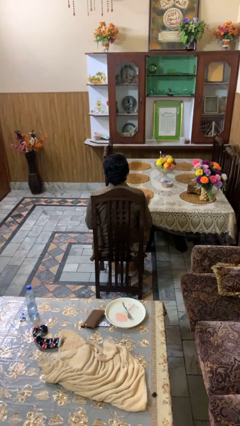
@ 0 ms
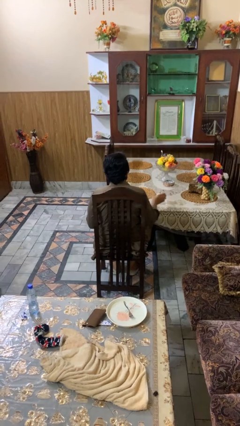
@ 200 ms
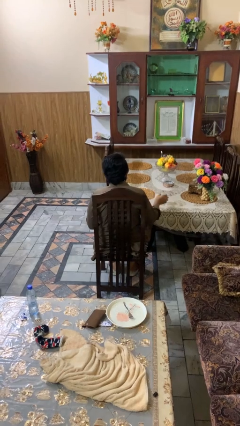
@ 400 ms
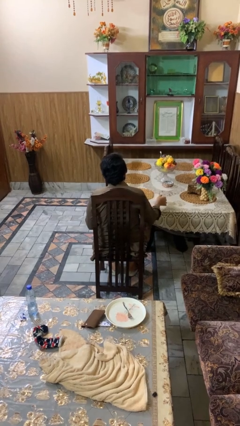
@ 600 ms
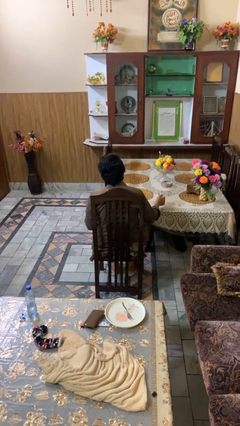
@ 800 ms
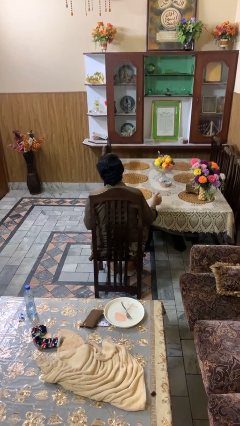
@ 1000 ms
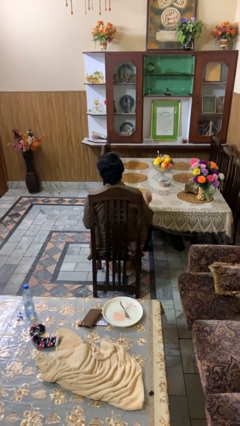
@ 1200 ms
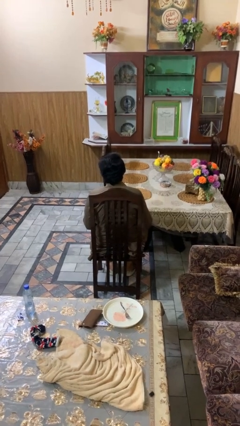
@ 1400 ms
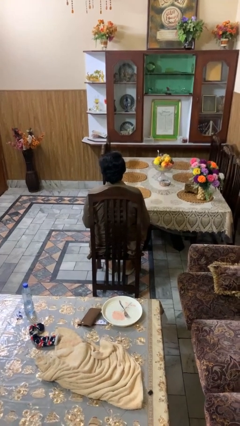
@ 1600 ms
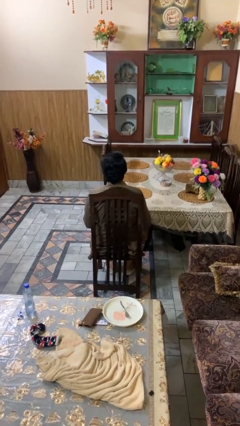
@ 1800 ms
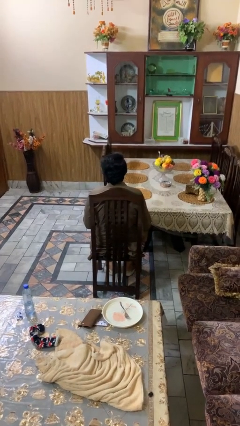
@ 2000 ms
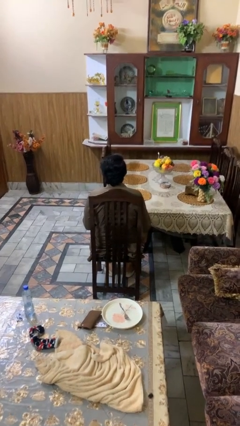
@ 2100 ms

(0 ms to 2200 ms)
person picks up object from table

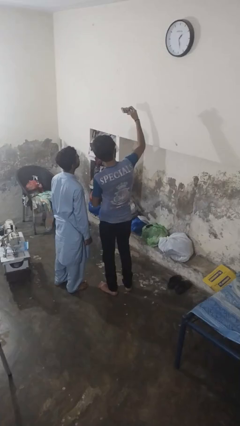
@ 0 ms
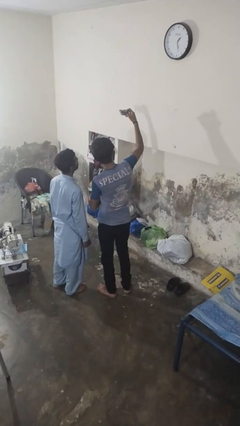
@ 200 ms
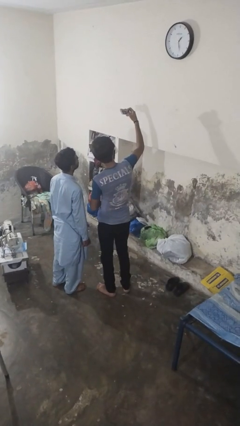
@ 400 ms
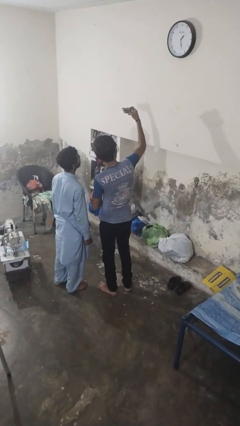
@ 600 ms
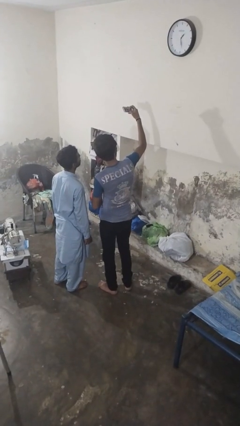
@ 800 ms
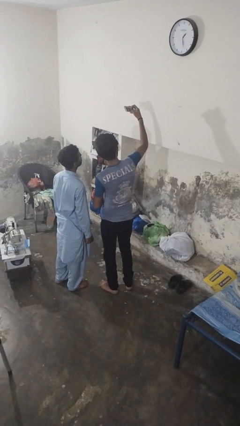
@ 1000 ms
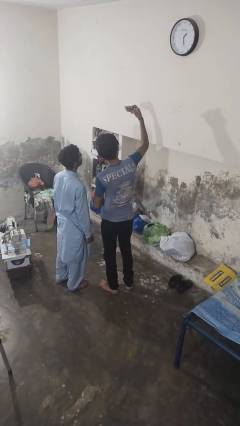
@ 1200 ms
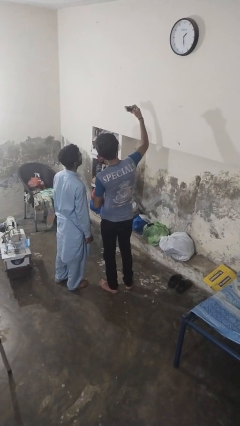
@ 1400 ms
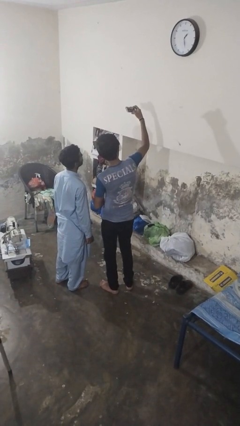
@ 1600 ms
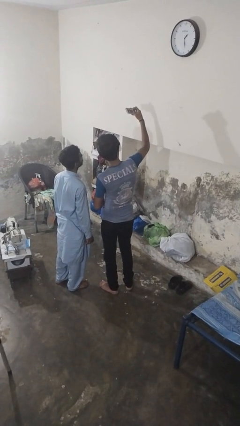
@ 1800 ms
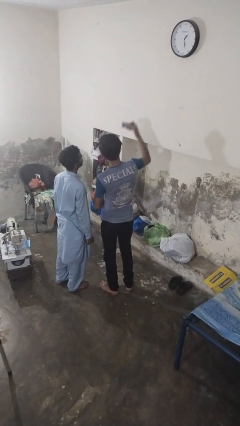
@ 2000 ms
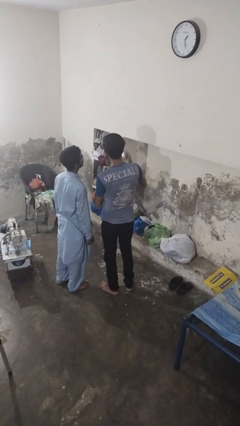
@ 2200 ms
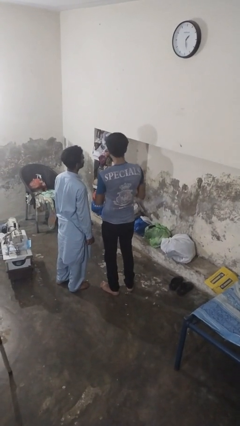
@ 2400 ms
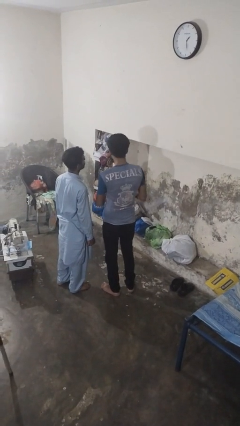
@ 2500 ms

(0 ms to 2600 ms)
person takes selfie with person

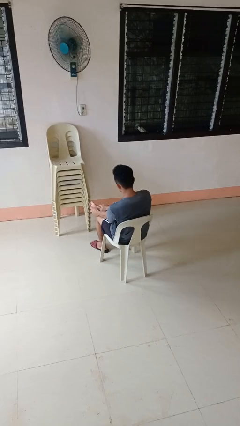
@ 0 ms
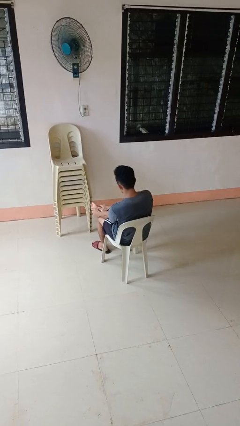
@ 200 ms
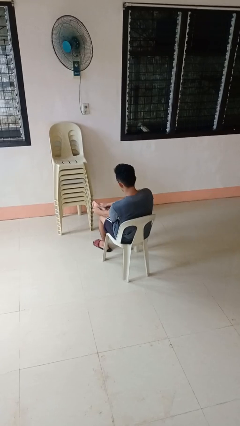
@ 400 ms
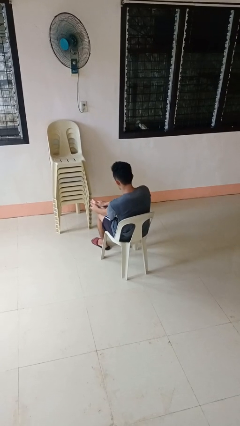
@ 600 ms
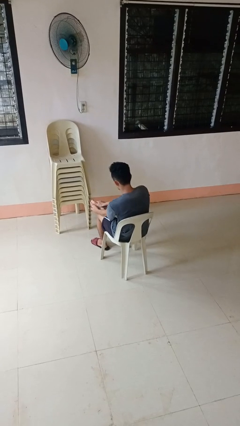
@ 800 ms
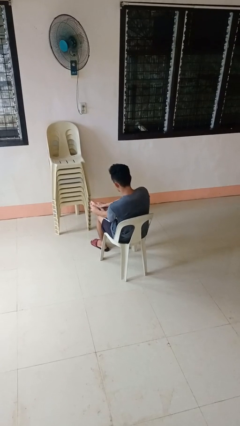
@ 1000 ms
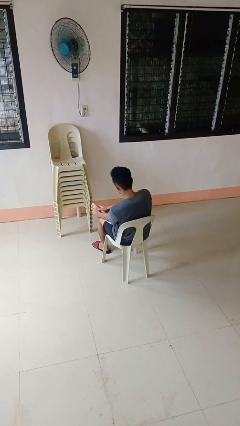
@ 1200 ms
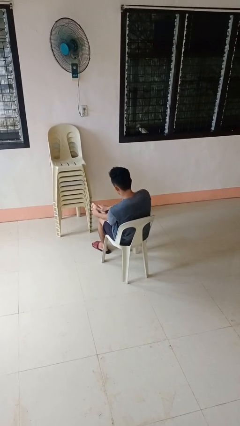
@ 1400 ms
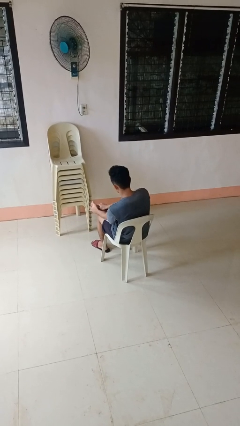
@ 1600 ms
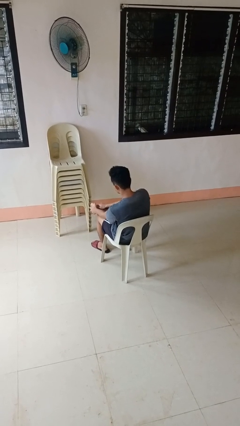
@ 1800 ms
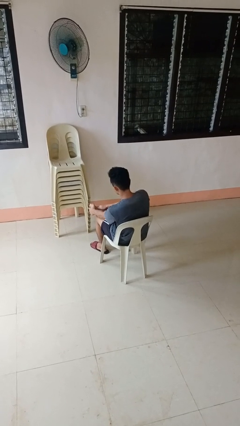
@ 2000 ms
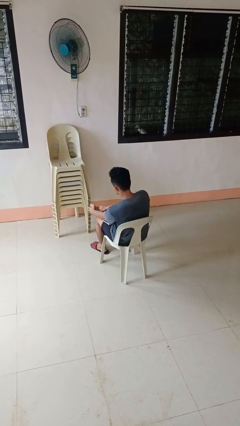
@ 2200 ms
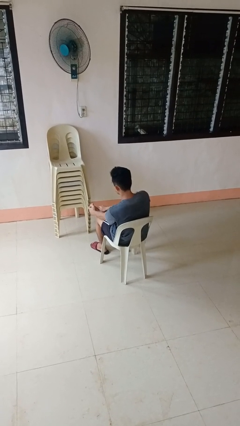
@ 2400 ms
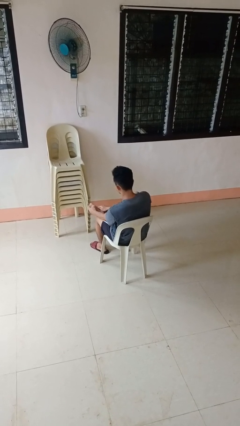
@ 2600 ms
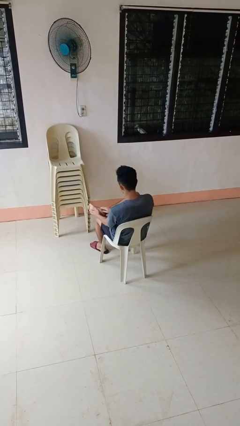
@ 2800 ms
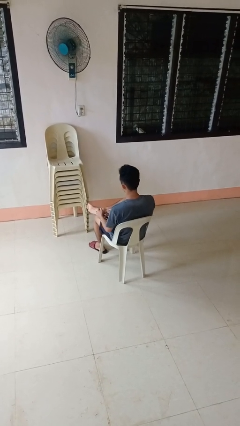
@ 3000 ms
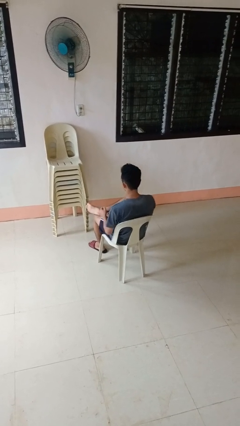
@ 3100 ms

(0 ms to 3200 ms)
person rubs foot

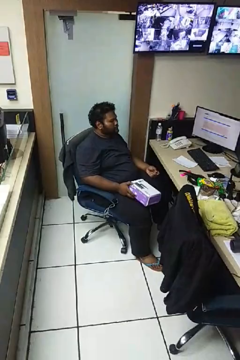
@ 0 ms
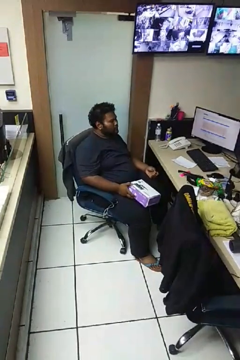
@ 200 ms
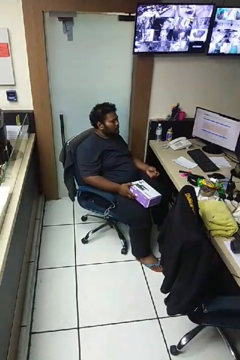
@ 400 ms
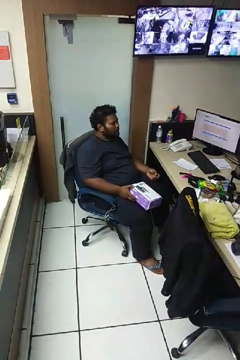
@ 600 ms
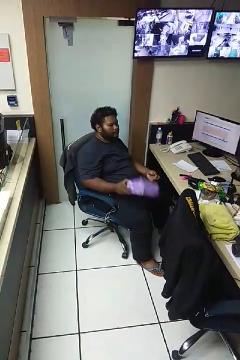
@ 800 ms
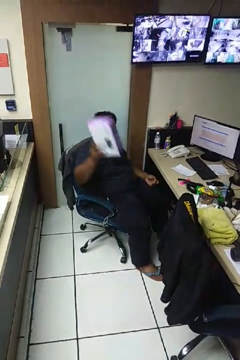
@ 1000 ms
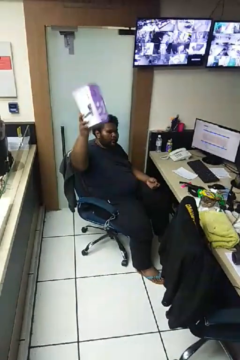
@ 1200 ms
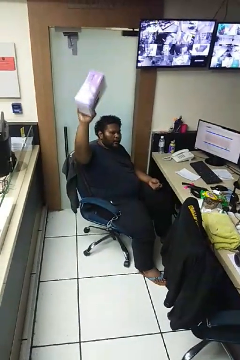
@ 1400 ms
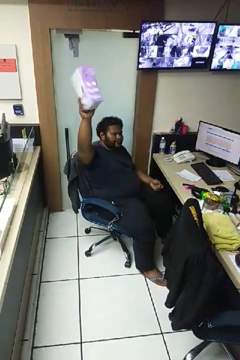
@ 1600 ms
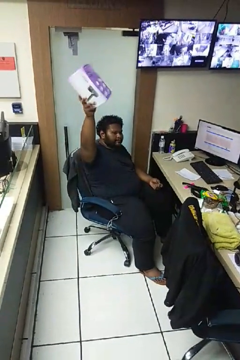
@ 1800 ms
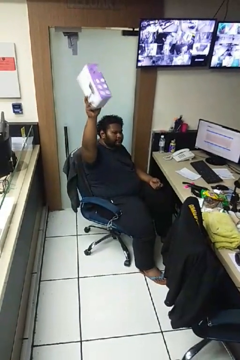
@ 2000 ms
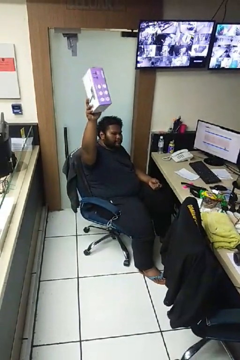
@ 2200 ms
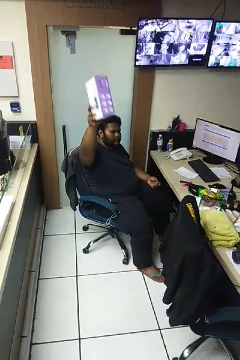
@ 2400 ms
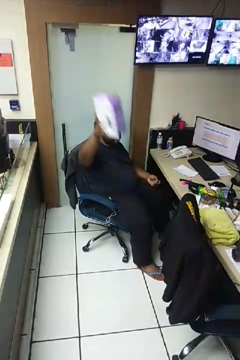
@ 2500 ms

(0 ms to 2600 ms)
person holds object above head

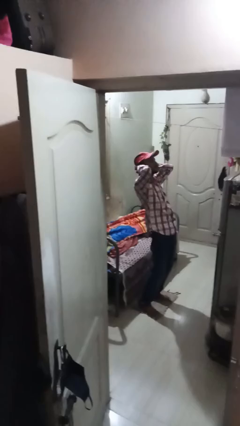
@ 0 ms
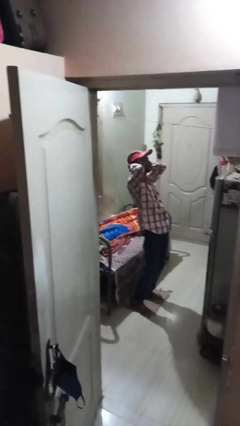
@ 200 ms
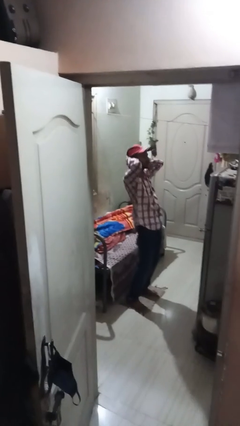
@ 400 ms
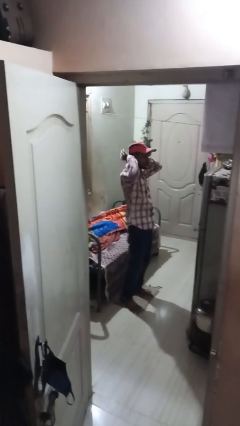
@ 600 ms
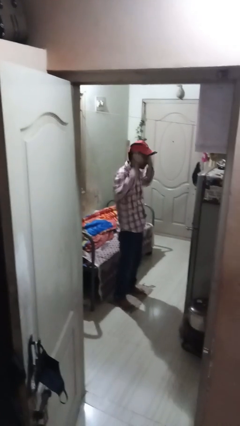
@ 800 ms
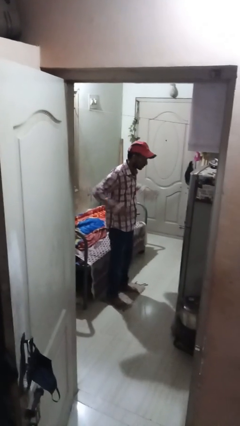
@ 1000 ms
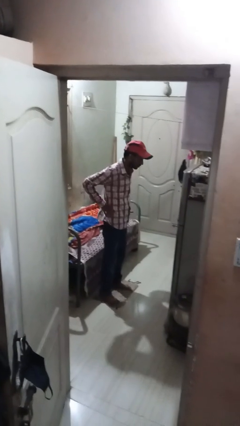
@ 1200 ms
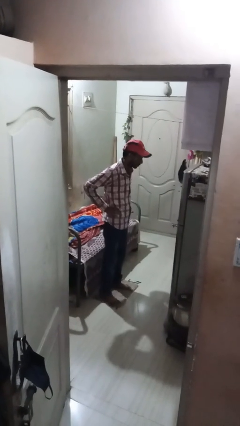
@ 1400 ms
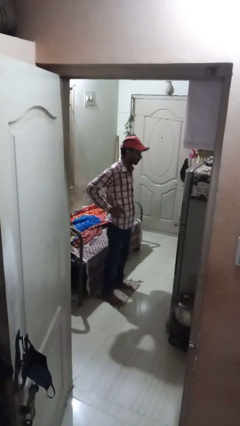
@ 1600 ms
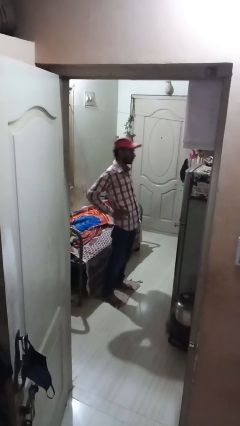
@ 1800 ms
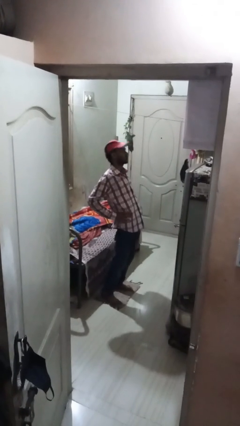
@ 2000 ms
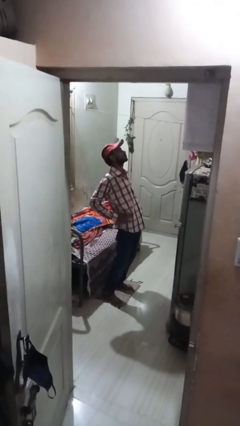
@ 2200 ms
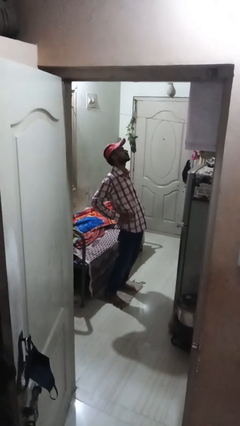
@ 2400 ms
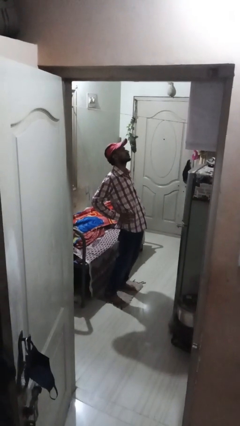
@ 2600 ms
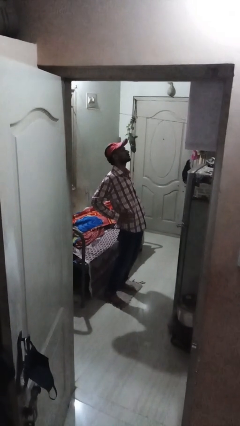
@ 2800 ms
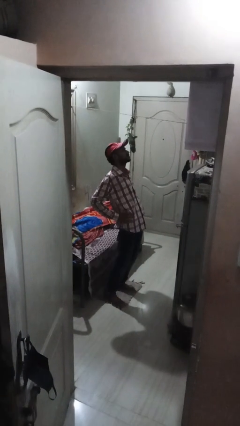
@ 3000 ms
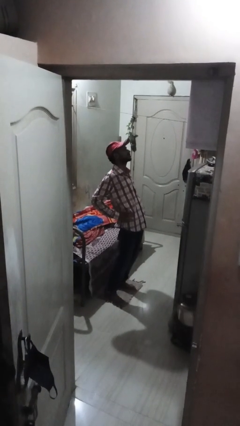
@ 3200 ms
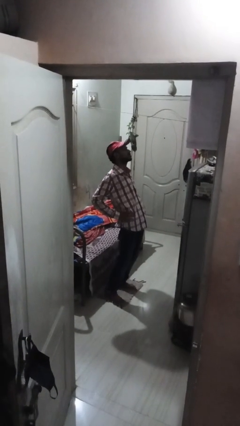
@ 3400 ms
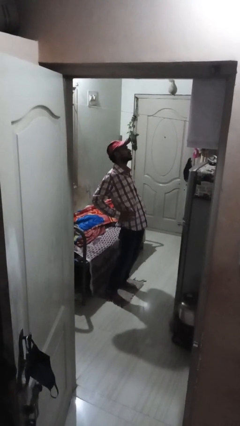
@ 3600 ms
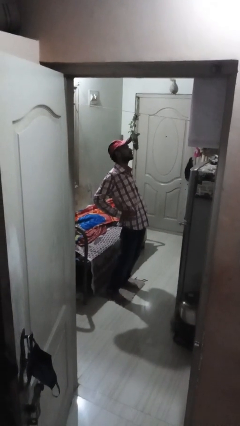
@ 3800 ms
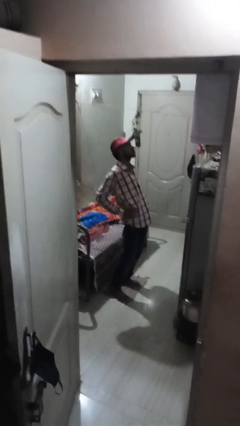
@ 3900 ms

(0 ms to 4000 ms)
person stretches back

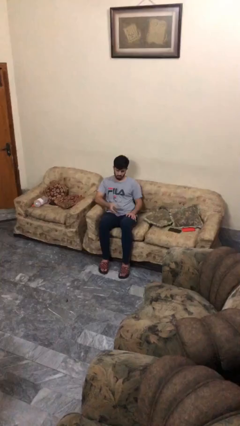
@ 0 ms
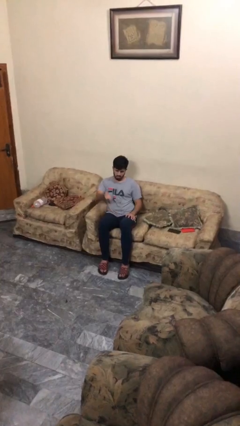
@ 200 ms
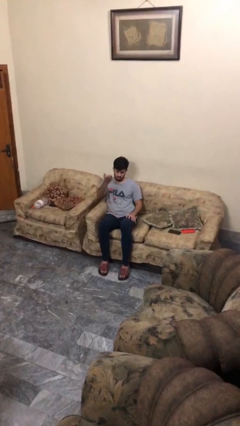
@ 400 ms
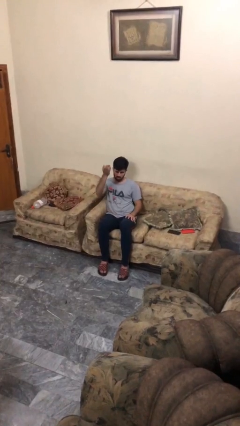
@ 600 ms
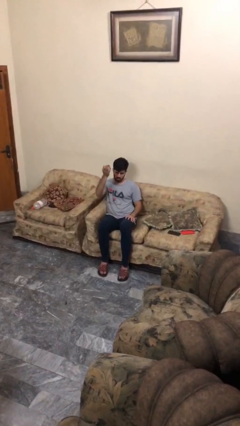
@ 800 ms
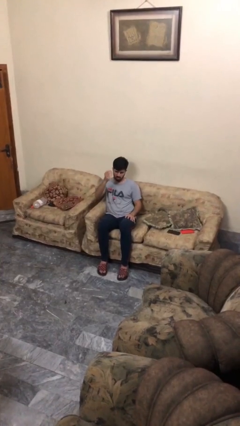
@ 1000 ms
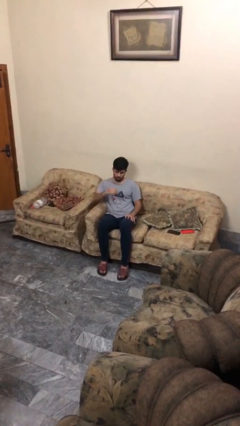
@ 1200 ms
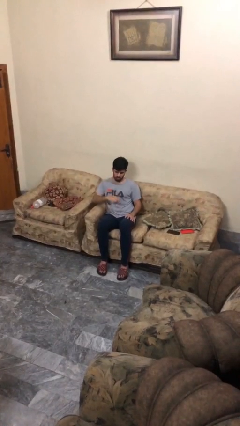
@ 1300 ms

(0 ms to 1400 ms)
person gestures swipe up

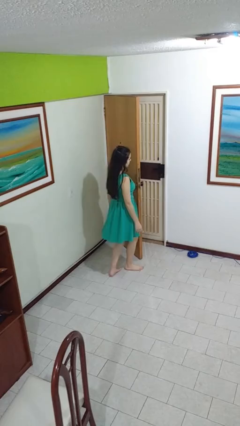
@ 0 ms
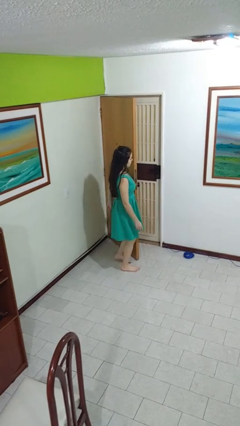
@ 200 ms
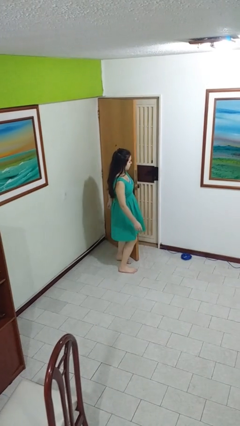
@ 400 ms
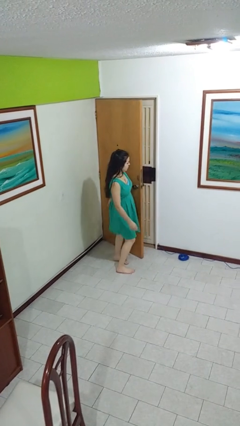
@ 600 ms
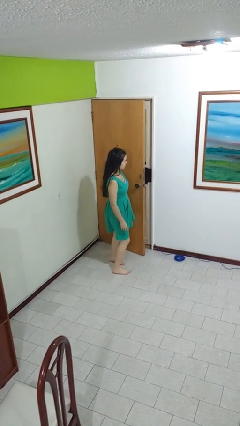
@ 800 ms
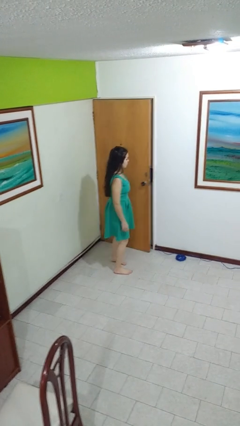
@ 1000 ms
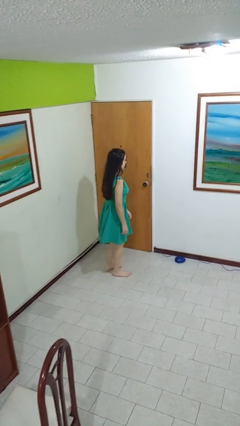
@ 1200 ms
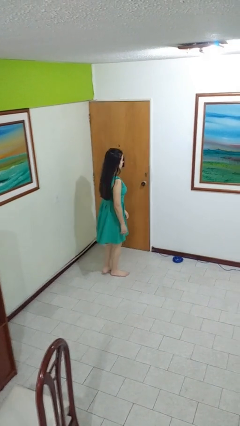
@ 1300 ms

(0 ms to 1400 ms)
person closes door with hip

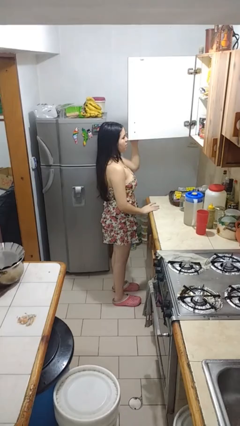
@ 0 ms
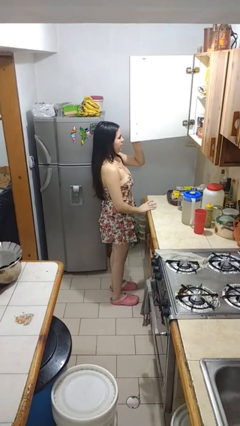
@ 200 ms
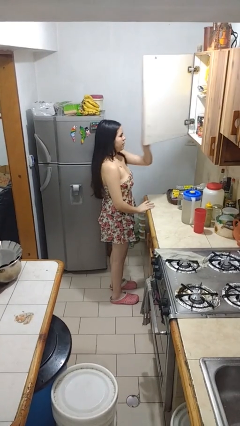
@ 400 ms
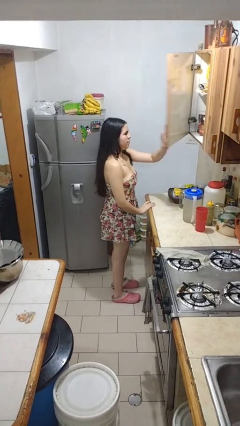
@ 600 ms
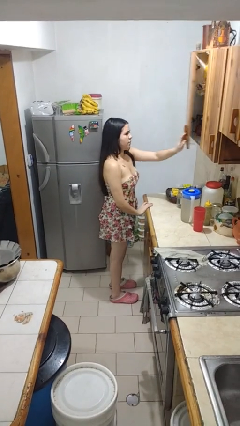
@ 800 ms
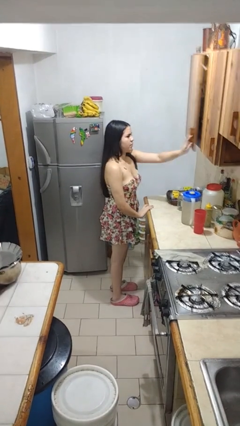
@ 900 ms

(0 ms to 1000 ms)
person closes cabinet
